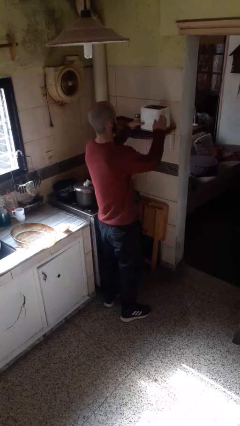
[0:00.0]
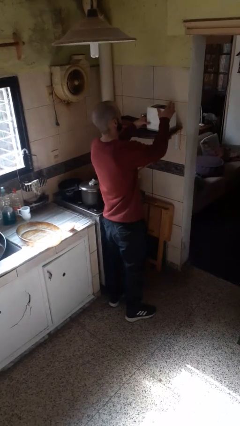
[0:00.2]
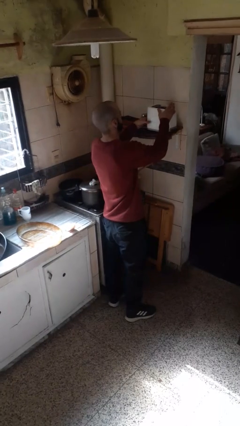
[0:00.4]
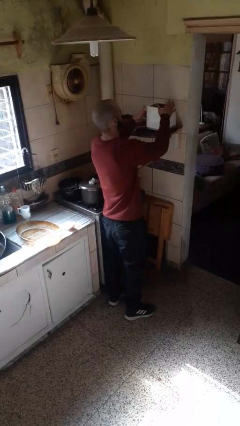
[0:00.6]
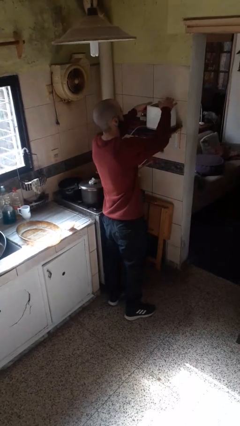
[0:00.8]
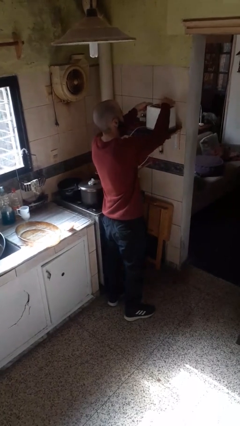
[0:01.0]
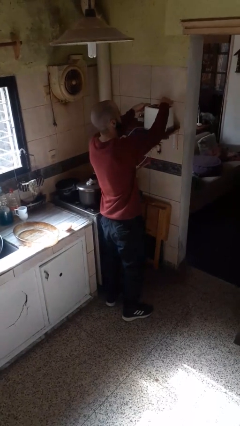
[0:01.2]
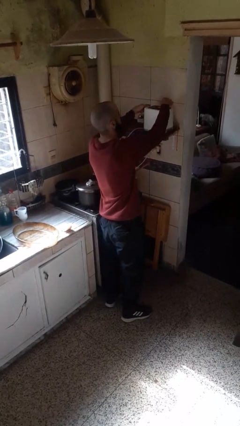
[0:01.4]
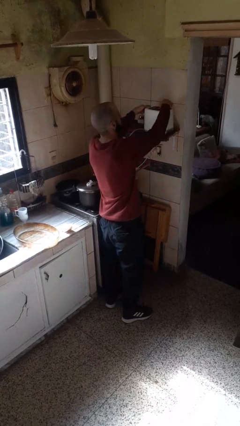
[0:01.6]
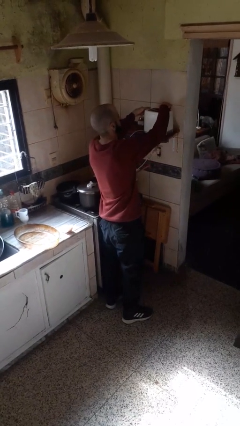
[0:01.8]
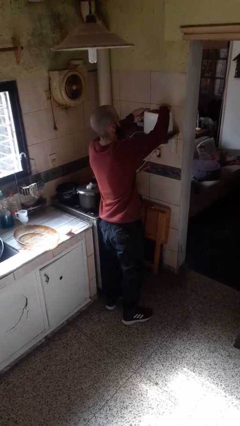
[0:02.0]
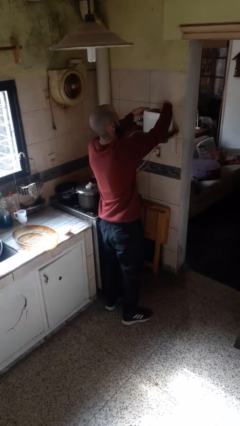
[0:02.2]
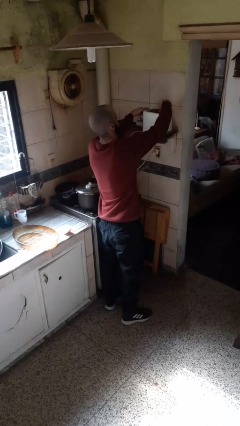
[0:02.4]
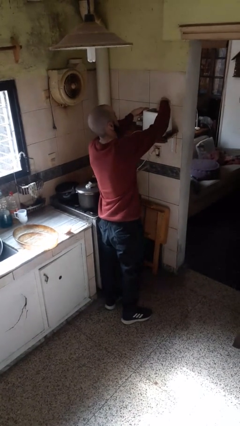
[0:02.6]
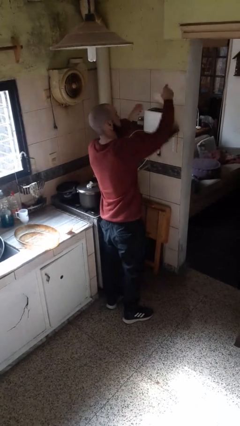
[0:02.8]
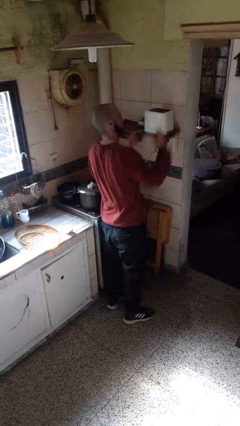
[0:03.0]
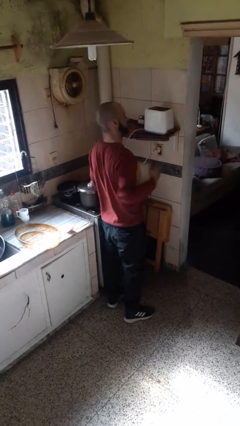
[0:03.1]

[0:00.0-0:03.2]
person takes object from toaster

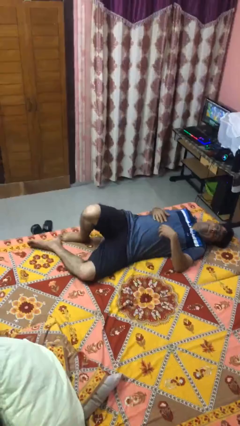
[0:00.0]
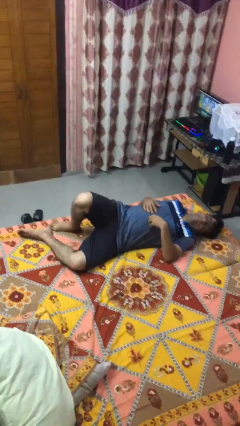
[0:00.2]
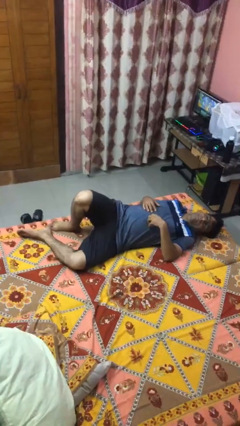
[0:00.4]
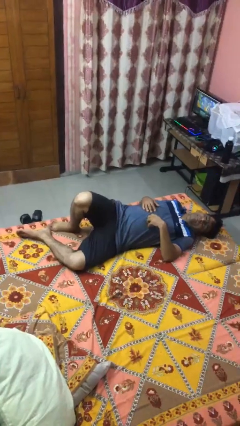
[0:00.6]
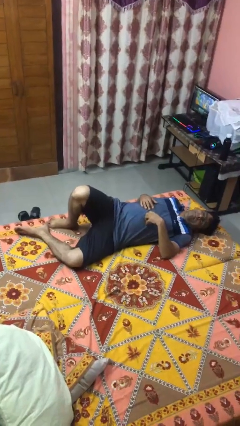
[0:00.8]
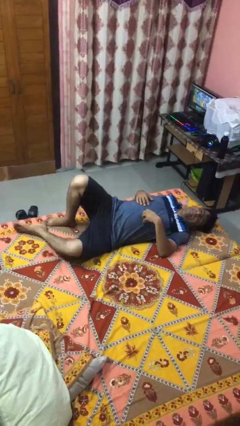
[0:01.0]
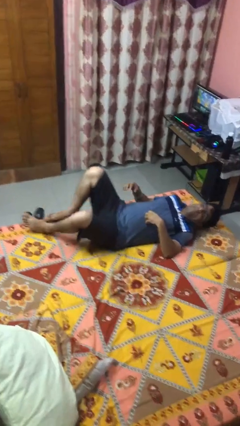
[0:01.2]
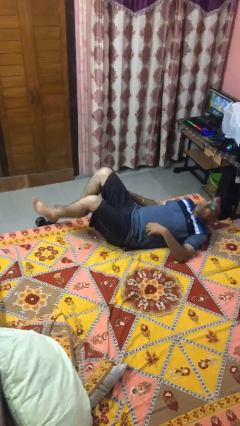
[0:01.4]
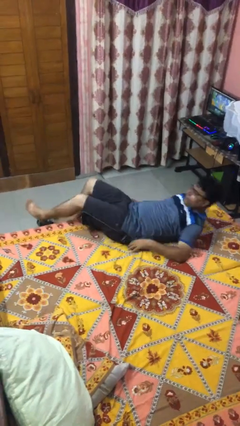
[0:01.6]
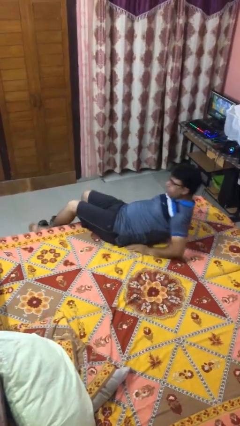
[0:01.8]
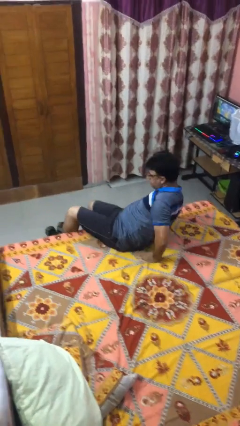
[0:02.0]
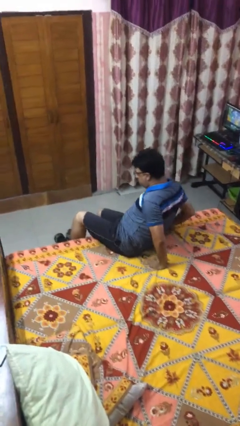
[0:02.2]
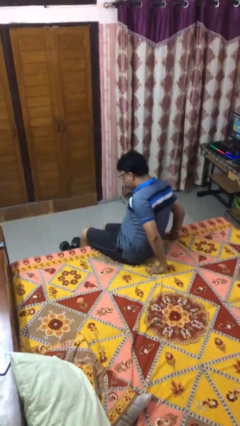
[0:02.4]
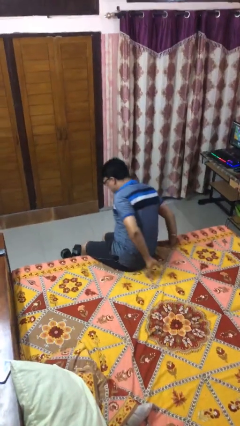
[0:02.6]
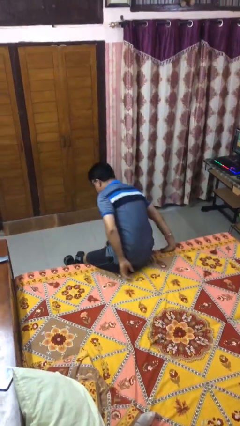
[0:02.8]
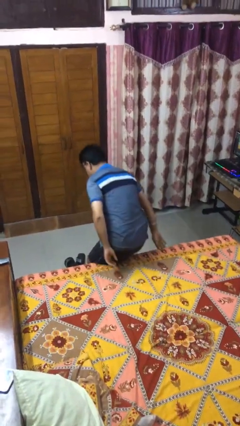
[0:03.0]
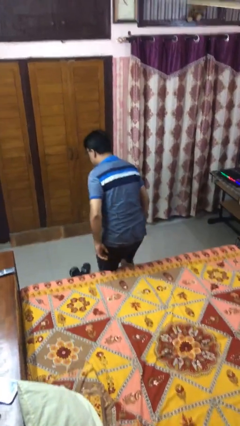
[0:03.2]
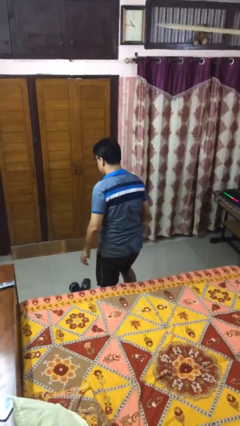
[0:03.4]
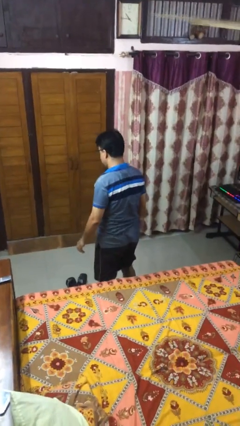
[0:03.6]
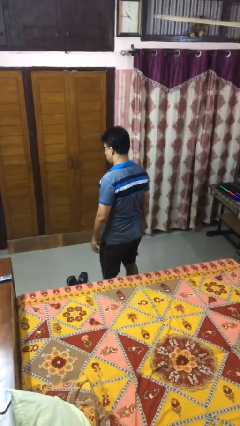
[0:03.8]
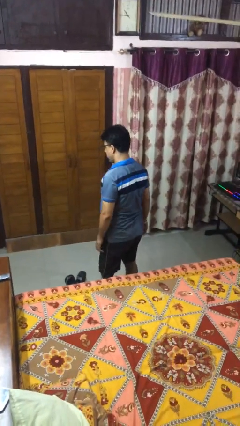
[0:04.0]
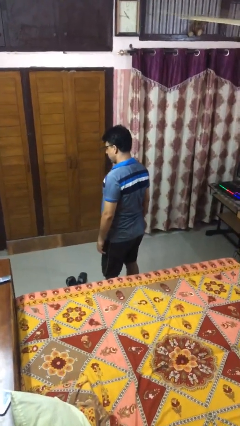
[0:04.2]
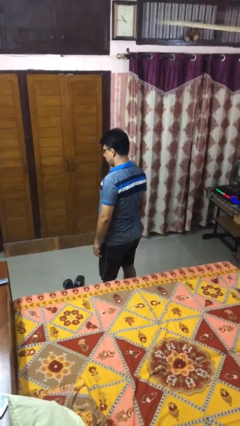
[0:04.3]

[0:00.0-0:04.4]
person stands up

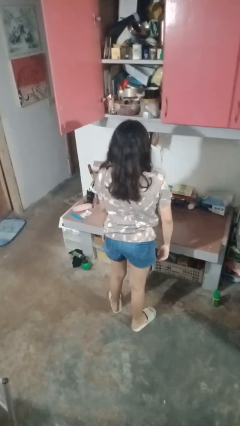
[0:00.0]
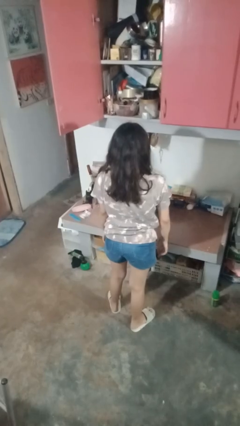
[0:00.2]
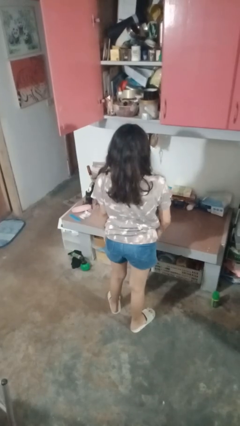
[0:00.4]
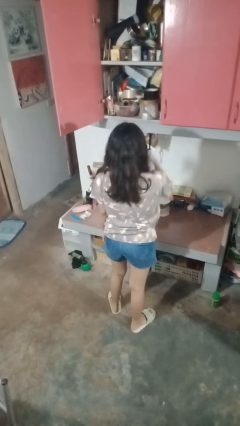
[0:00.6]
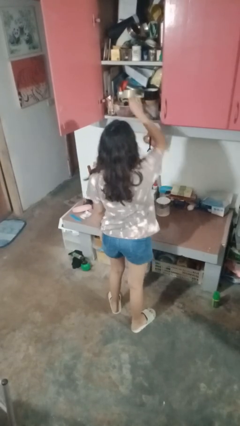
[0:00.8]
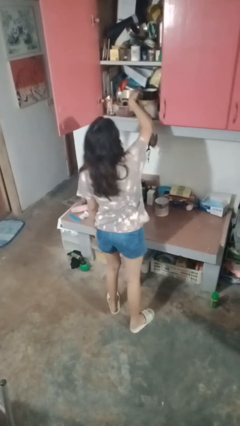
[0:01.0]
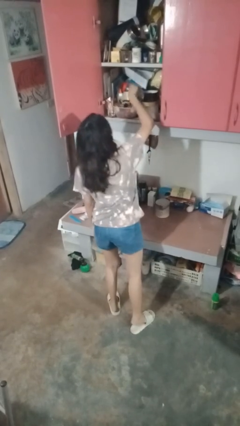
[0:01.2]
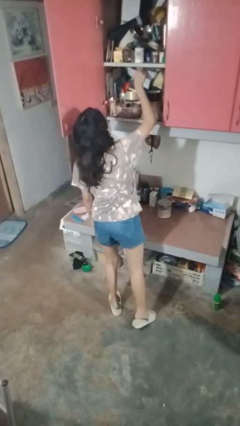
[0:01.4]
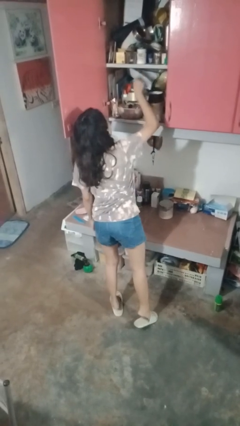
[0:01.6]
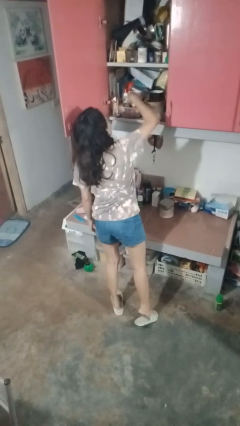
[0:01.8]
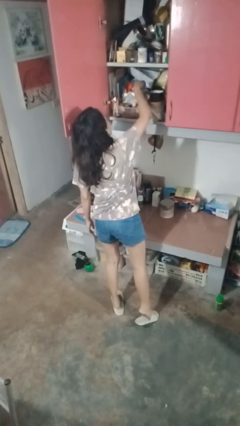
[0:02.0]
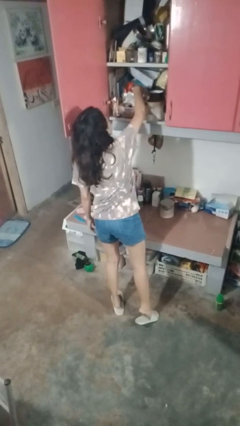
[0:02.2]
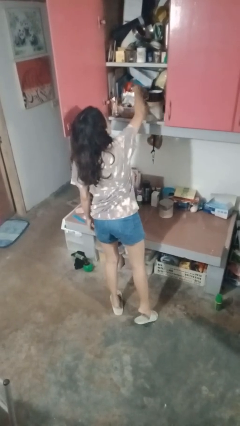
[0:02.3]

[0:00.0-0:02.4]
person searches in cabinet

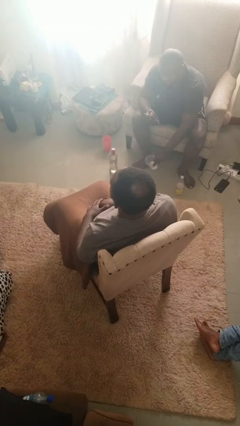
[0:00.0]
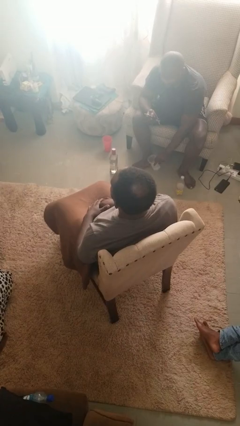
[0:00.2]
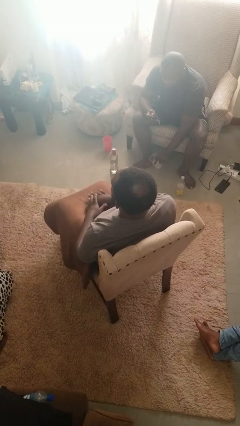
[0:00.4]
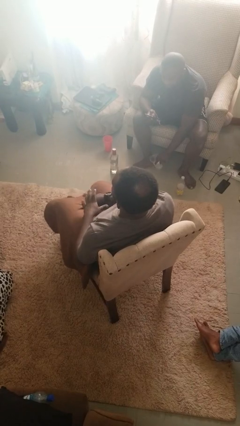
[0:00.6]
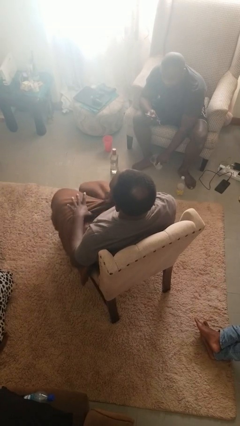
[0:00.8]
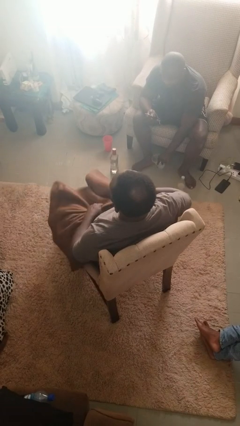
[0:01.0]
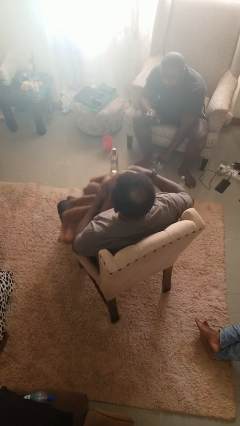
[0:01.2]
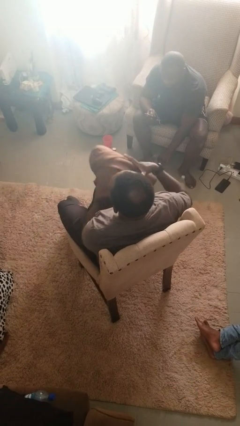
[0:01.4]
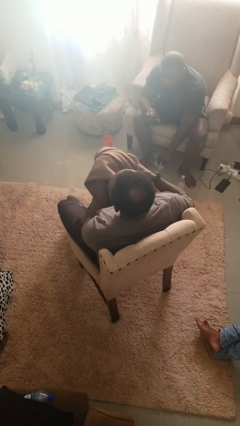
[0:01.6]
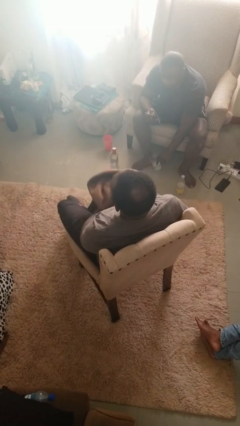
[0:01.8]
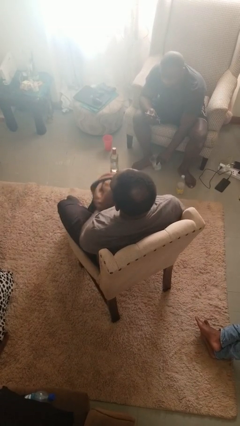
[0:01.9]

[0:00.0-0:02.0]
person uncovers with blanket

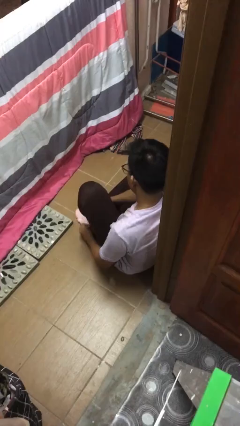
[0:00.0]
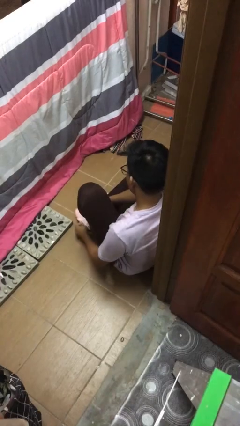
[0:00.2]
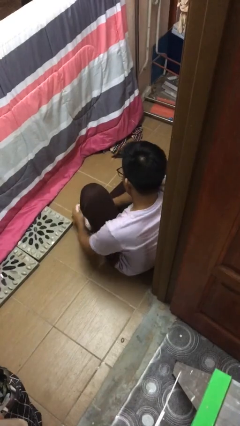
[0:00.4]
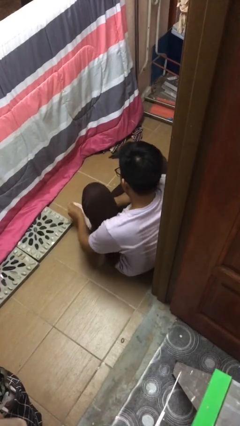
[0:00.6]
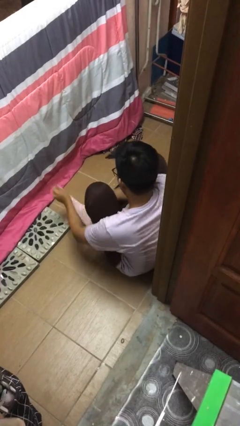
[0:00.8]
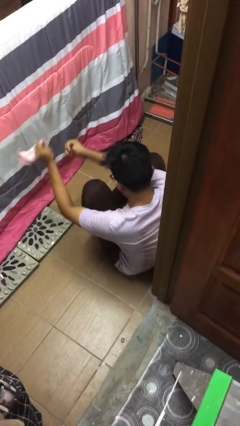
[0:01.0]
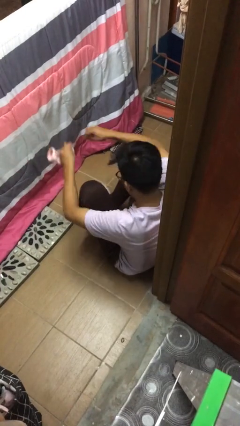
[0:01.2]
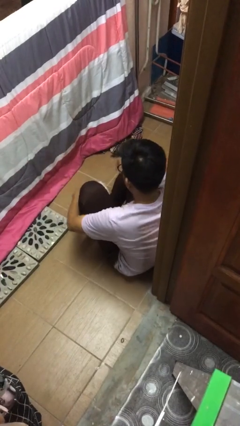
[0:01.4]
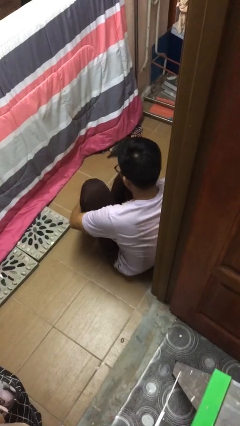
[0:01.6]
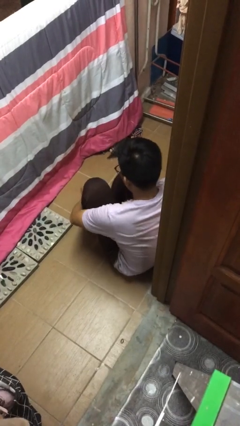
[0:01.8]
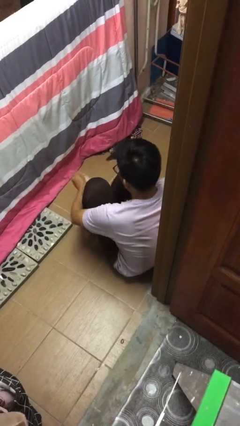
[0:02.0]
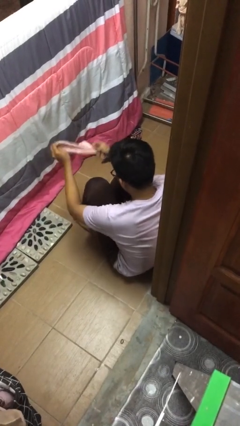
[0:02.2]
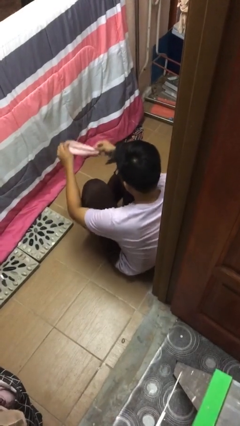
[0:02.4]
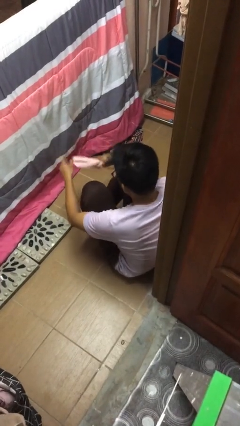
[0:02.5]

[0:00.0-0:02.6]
person takes off socks

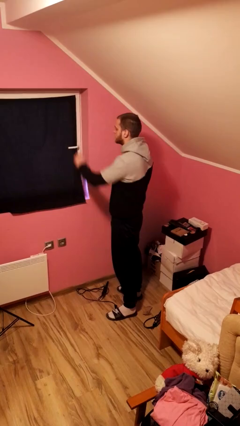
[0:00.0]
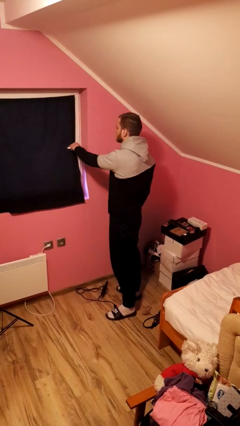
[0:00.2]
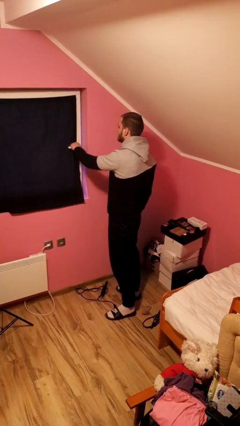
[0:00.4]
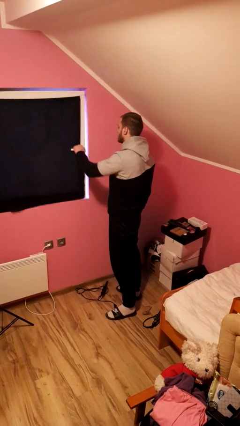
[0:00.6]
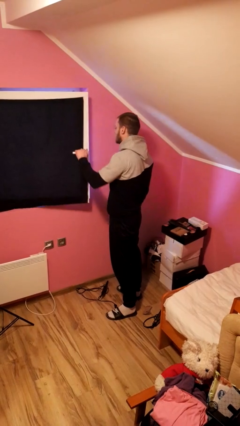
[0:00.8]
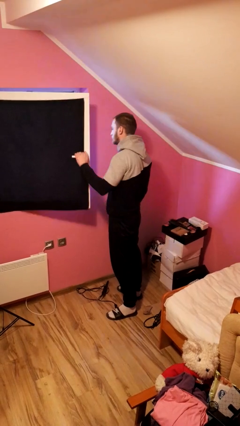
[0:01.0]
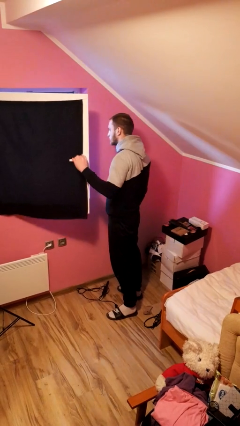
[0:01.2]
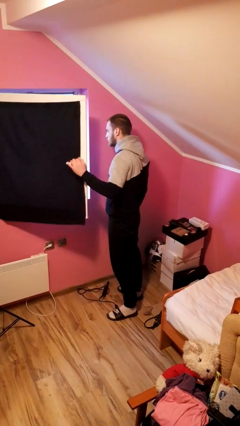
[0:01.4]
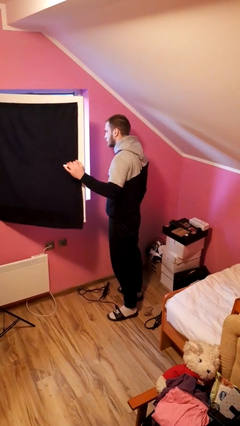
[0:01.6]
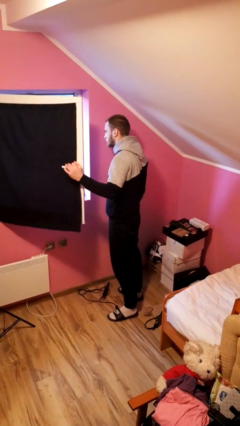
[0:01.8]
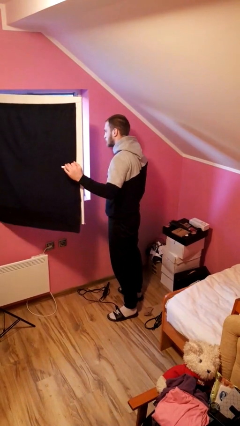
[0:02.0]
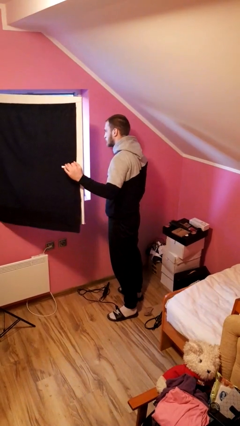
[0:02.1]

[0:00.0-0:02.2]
person opens home window
